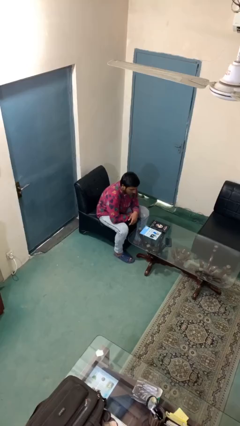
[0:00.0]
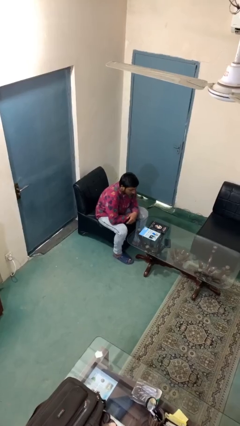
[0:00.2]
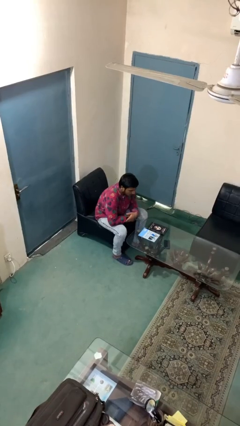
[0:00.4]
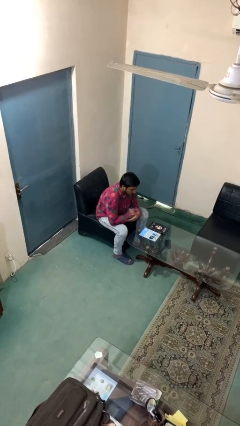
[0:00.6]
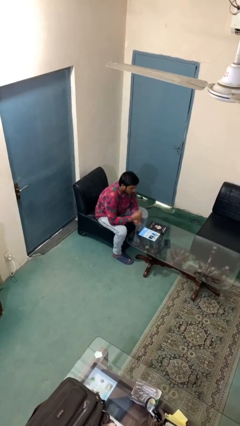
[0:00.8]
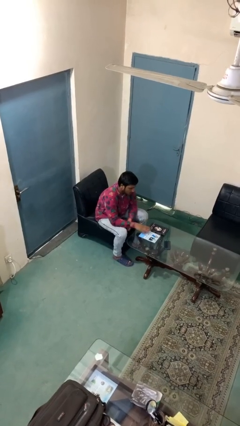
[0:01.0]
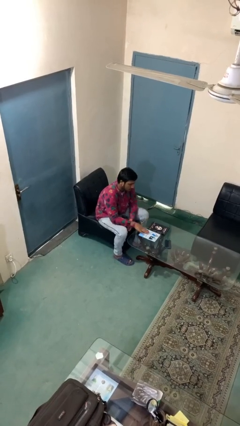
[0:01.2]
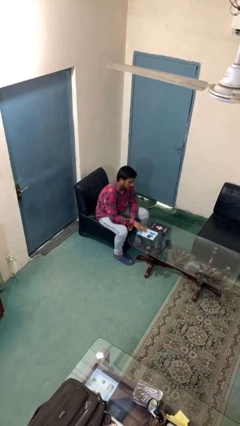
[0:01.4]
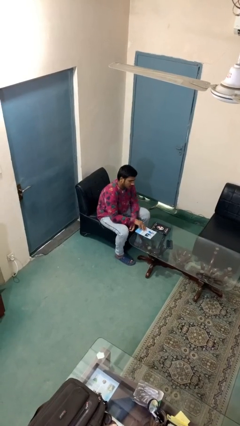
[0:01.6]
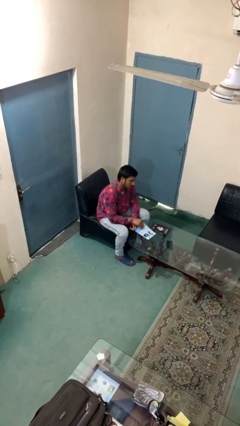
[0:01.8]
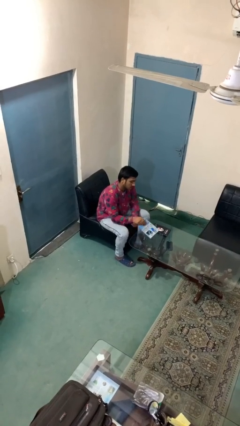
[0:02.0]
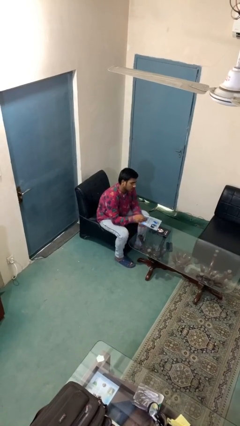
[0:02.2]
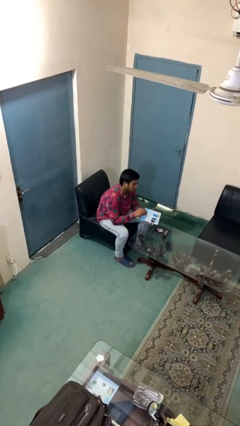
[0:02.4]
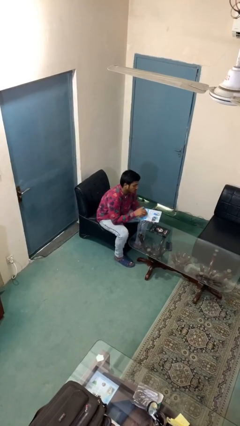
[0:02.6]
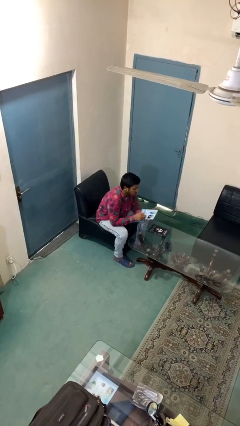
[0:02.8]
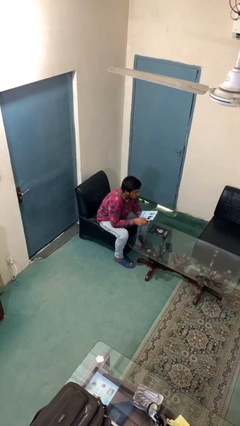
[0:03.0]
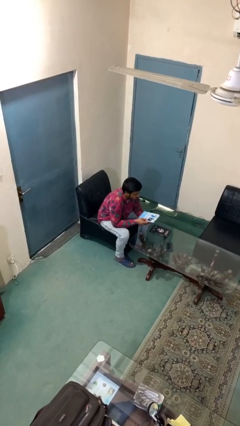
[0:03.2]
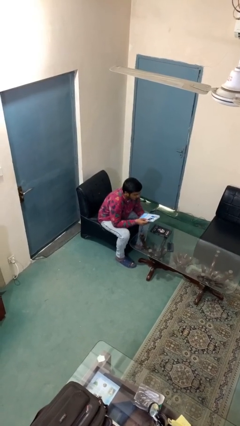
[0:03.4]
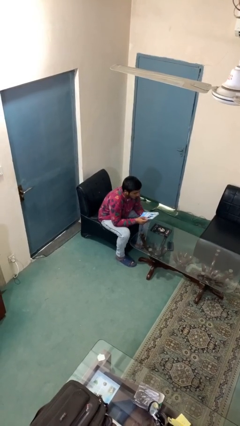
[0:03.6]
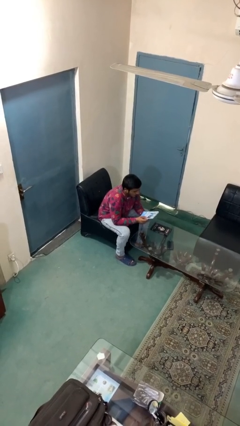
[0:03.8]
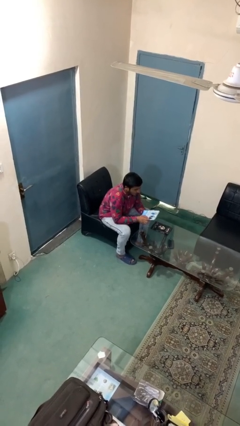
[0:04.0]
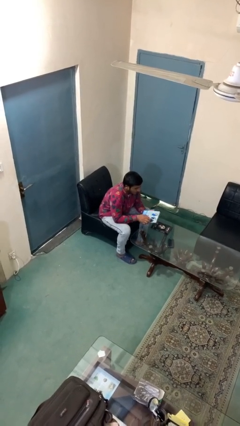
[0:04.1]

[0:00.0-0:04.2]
person picks up object from table

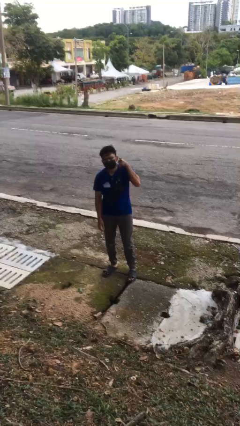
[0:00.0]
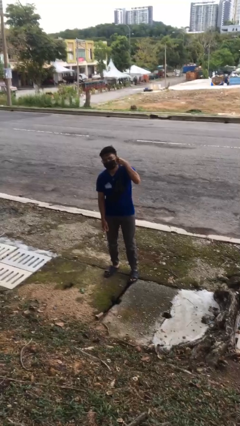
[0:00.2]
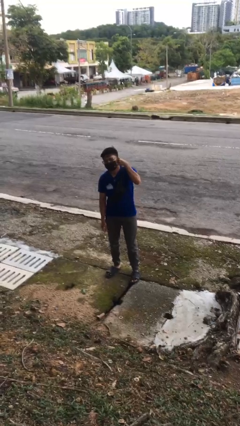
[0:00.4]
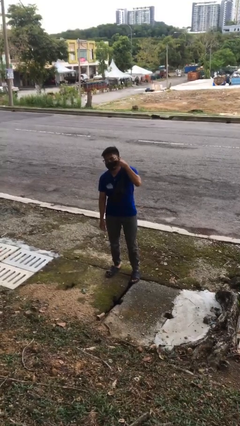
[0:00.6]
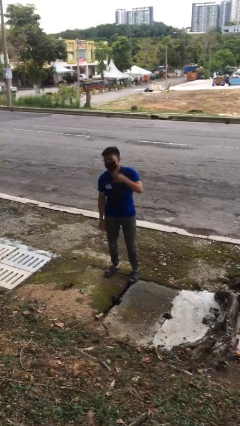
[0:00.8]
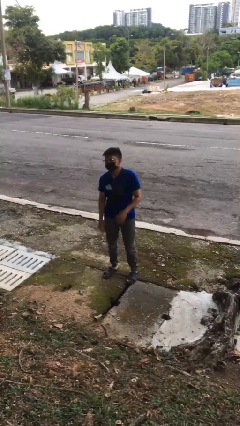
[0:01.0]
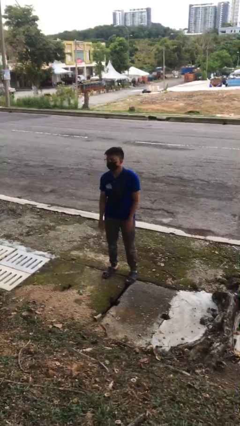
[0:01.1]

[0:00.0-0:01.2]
person gestures call me

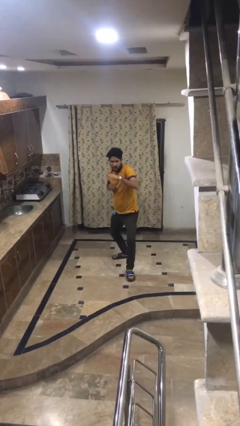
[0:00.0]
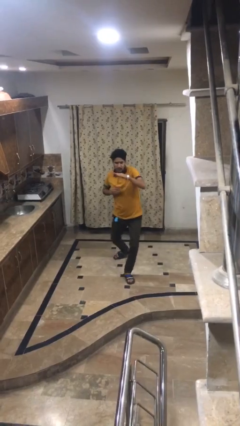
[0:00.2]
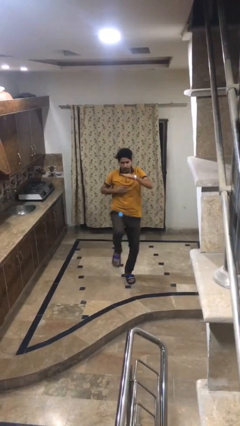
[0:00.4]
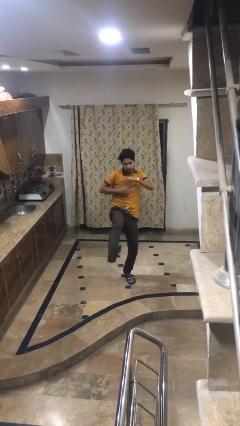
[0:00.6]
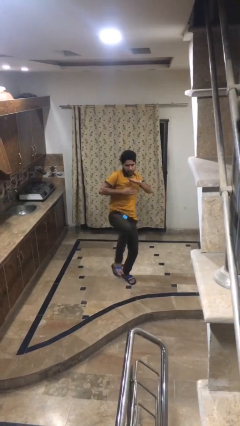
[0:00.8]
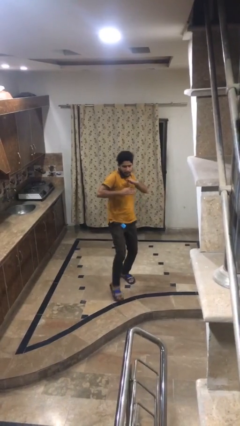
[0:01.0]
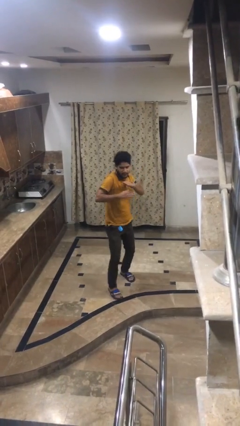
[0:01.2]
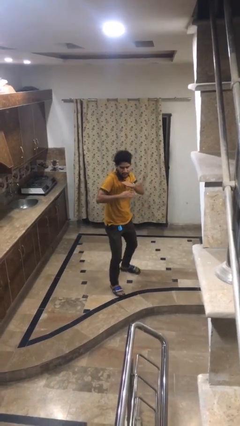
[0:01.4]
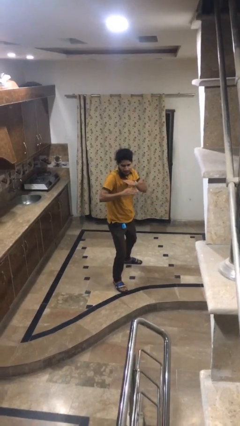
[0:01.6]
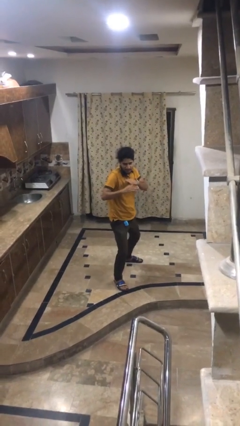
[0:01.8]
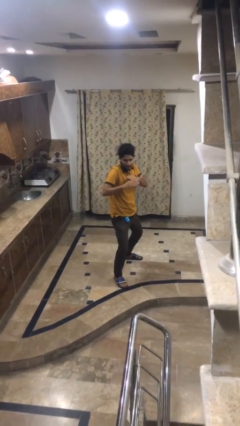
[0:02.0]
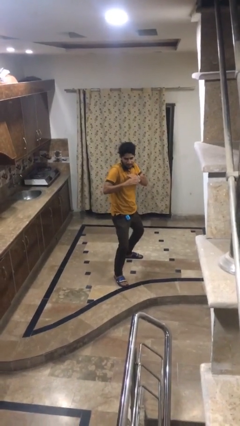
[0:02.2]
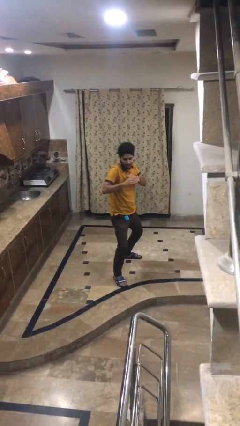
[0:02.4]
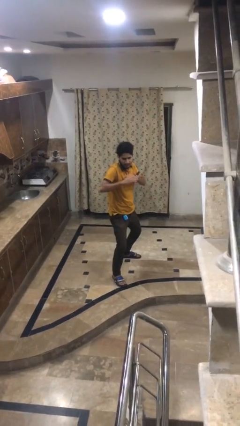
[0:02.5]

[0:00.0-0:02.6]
person karate kicks

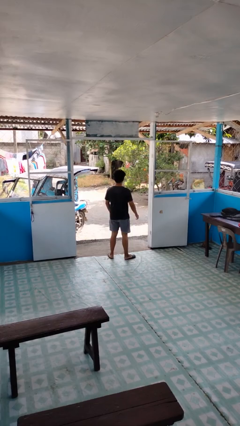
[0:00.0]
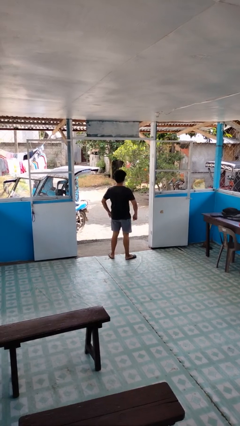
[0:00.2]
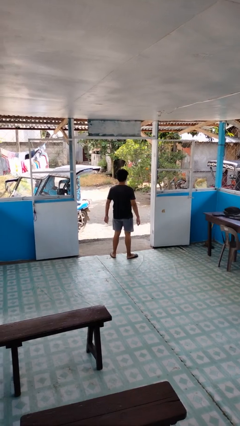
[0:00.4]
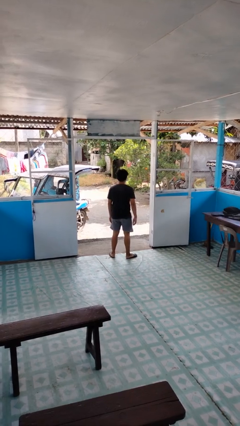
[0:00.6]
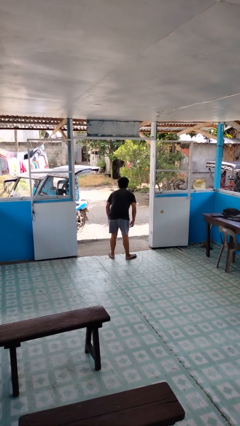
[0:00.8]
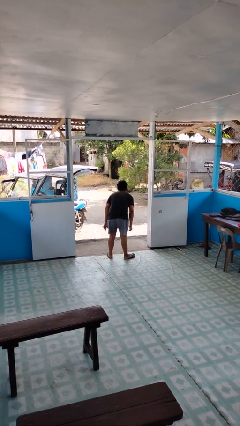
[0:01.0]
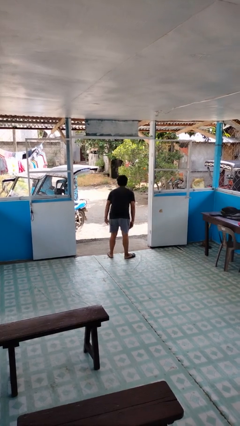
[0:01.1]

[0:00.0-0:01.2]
person wiggles hips

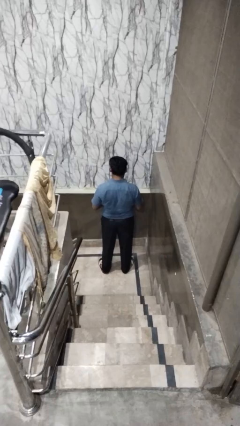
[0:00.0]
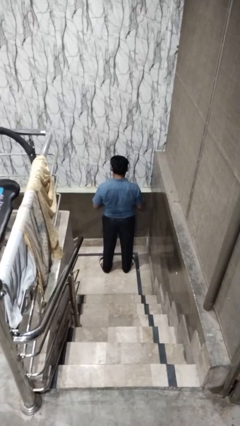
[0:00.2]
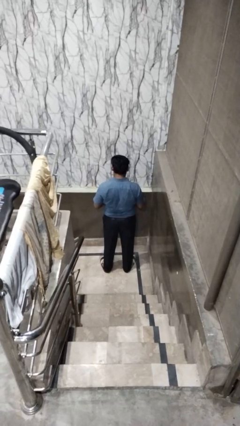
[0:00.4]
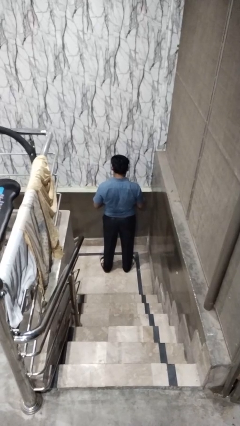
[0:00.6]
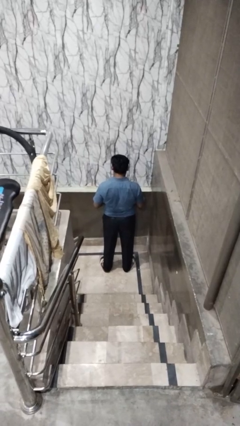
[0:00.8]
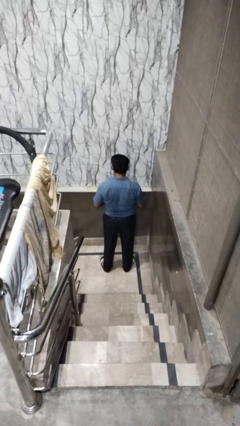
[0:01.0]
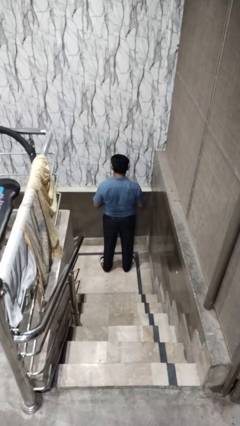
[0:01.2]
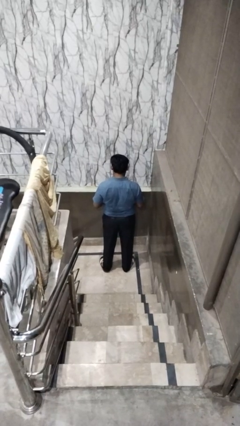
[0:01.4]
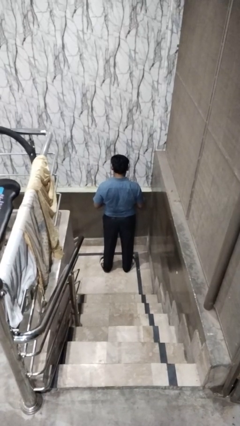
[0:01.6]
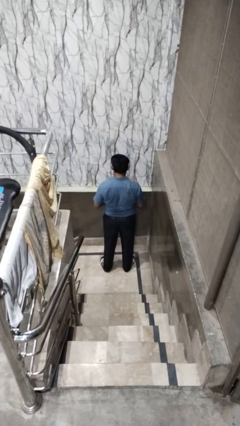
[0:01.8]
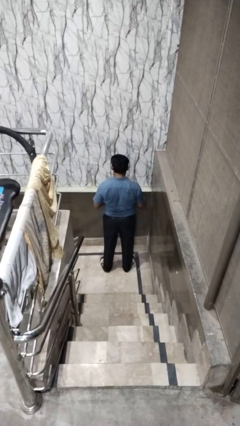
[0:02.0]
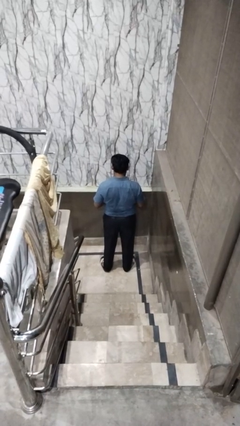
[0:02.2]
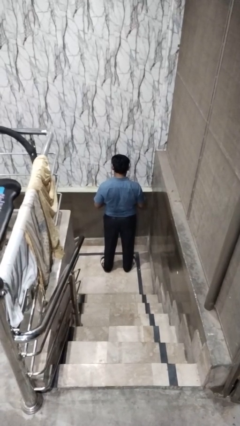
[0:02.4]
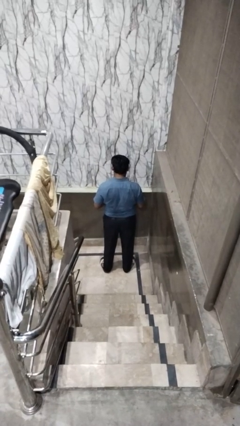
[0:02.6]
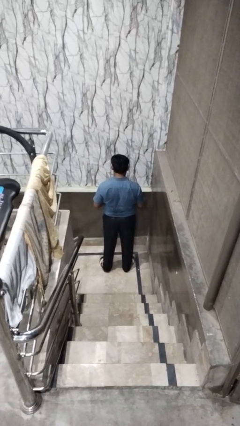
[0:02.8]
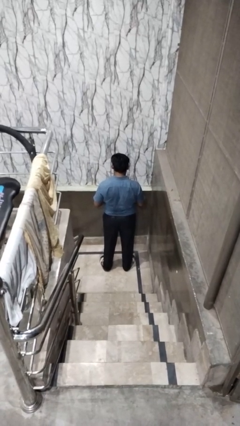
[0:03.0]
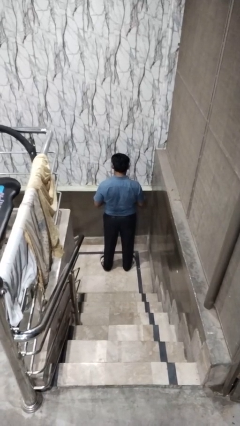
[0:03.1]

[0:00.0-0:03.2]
person sticks out tongue

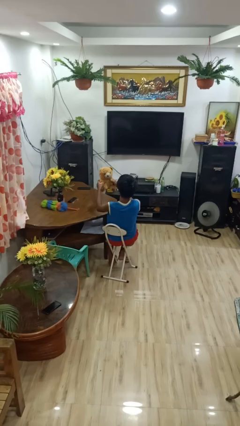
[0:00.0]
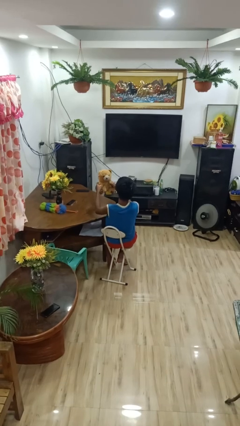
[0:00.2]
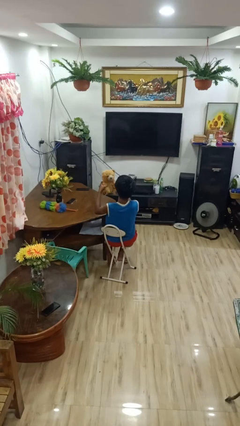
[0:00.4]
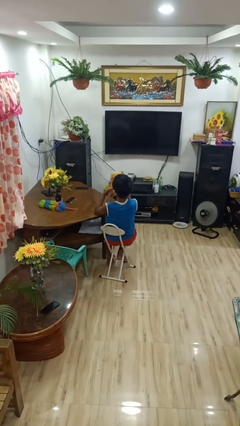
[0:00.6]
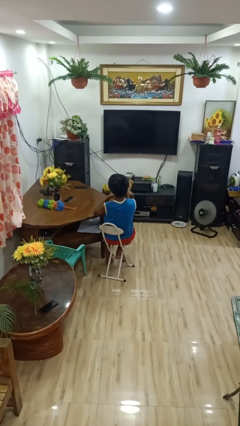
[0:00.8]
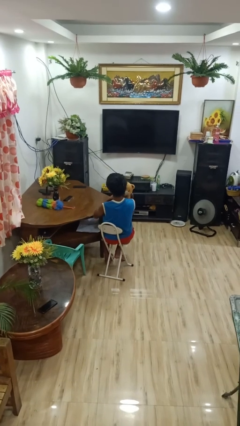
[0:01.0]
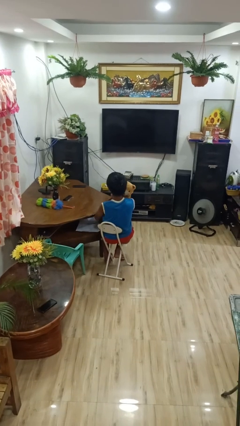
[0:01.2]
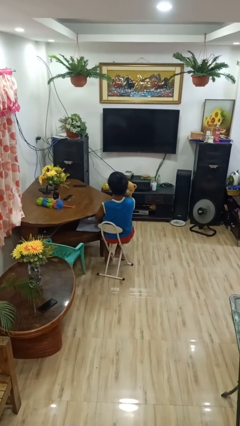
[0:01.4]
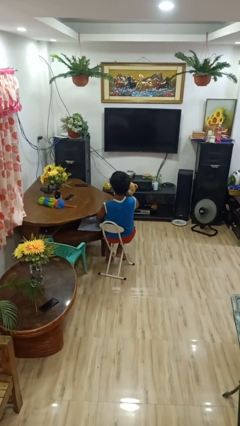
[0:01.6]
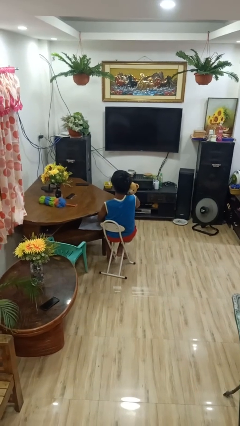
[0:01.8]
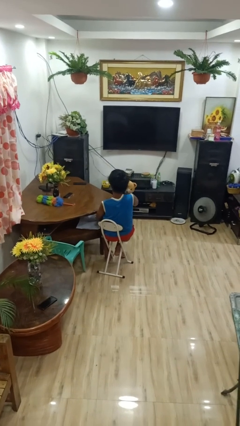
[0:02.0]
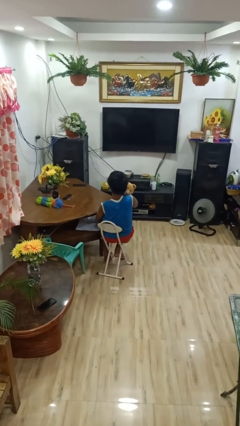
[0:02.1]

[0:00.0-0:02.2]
person hugs stuffed animal

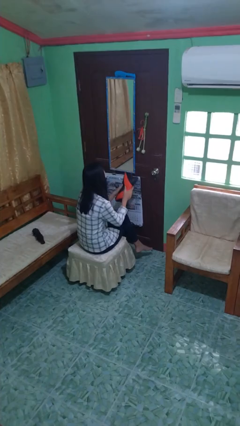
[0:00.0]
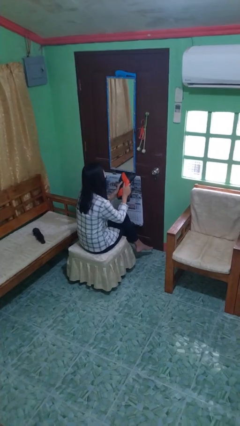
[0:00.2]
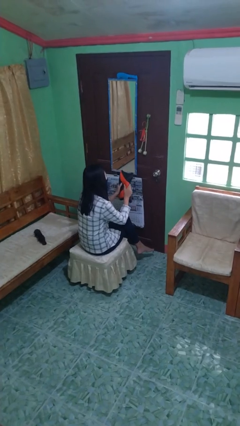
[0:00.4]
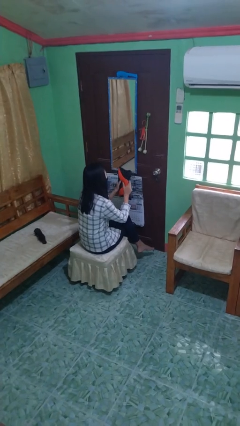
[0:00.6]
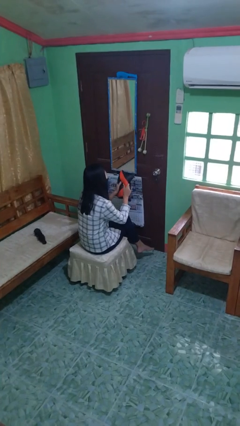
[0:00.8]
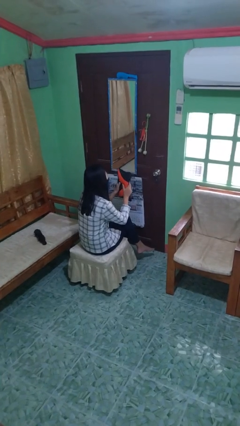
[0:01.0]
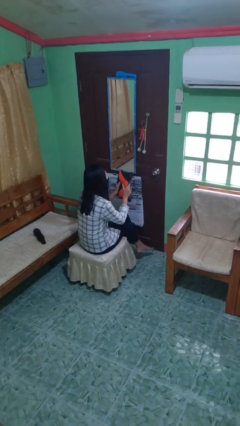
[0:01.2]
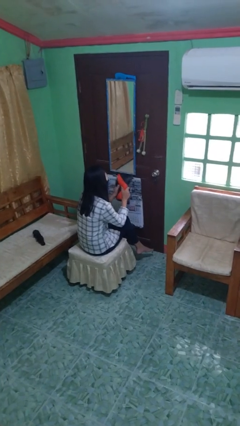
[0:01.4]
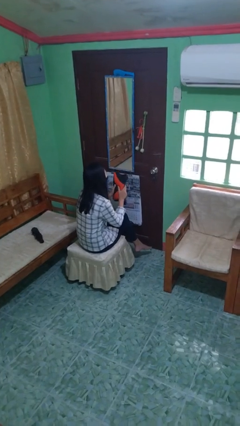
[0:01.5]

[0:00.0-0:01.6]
person squeezes object

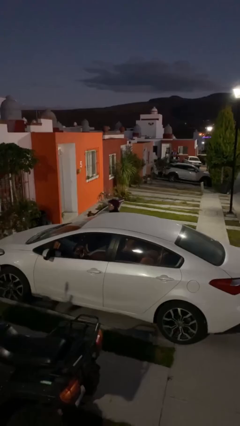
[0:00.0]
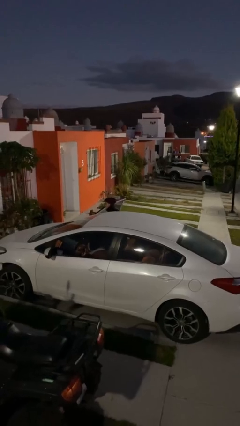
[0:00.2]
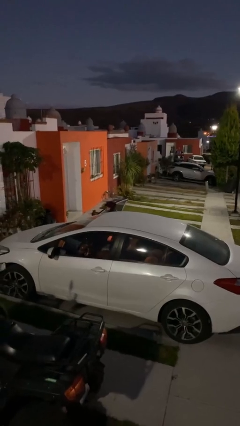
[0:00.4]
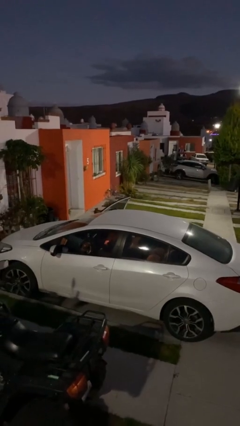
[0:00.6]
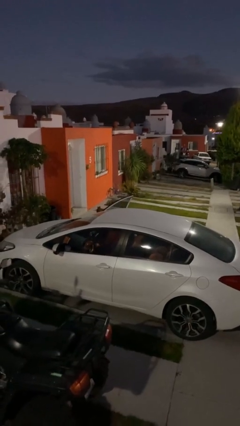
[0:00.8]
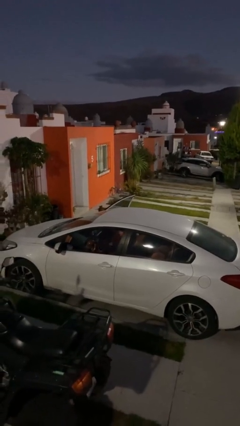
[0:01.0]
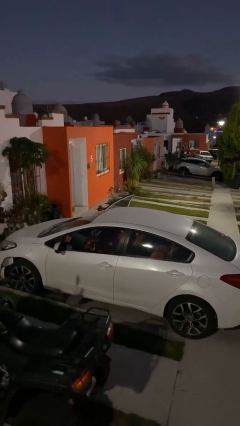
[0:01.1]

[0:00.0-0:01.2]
person enters car
